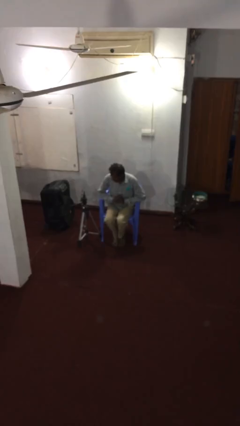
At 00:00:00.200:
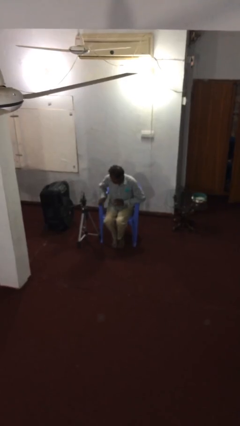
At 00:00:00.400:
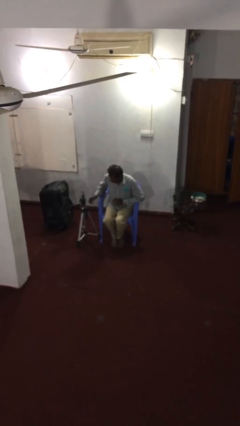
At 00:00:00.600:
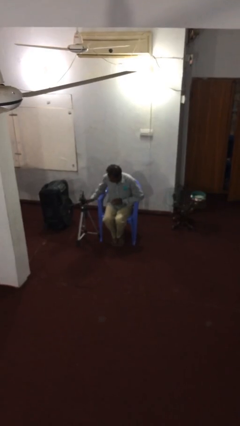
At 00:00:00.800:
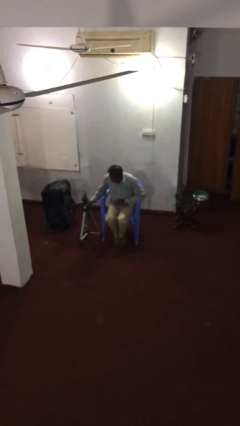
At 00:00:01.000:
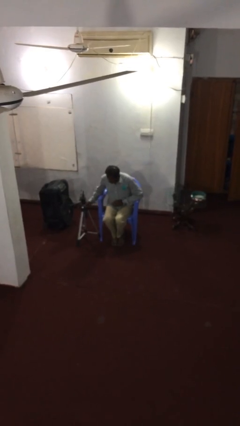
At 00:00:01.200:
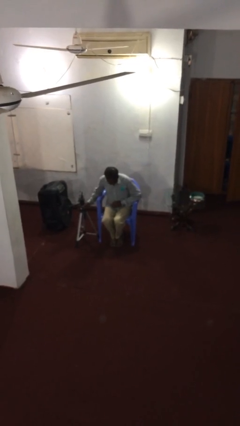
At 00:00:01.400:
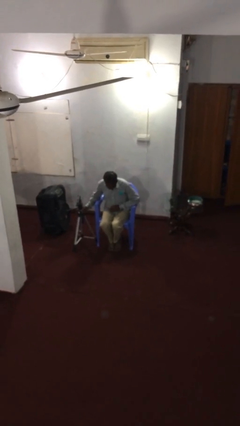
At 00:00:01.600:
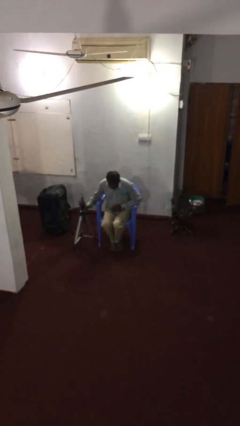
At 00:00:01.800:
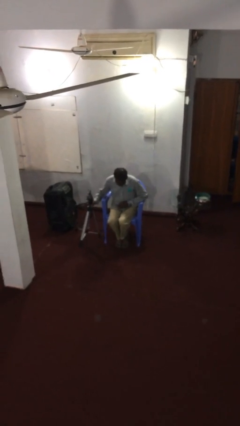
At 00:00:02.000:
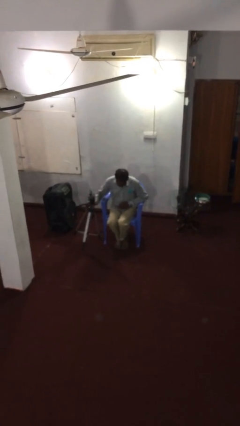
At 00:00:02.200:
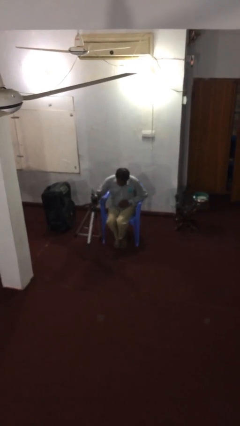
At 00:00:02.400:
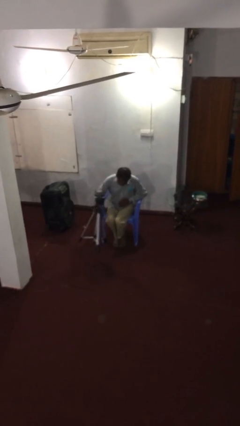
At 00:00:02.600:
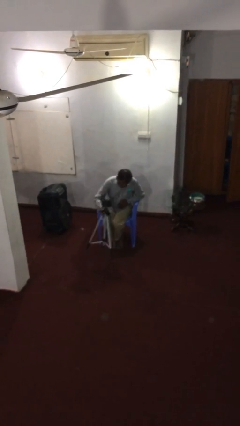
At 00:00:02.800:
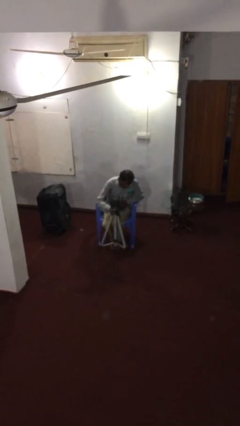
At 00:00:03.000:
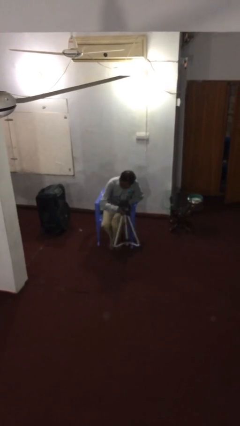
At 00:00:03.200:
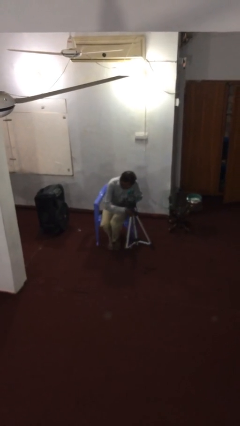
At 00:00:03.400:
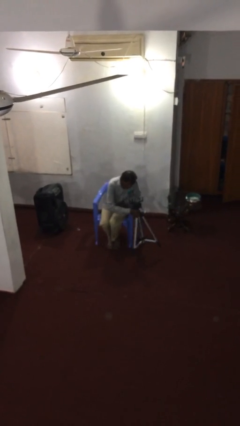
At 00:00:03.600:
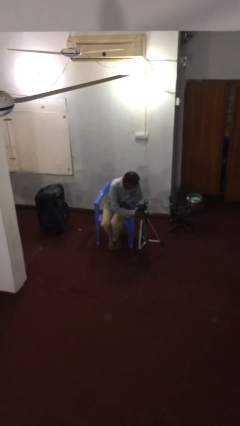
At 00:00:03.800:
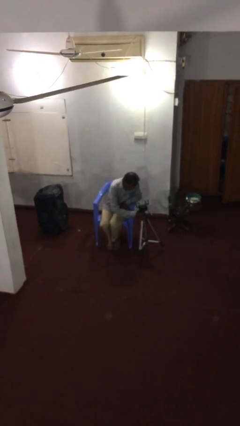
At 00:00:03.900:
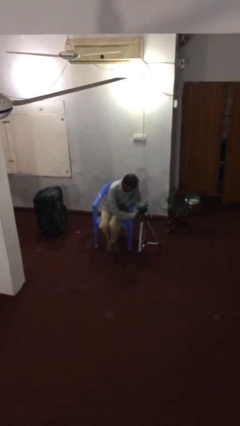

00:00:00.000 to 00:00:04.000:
person picks up object from floor

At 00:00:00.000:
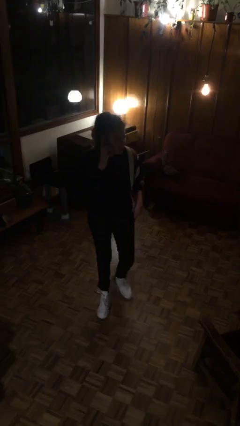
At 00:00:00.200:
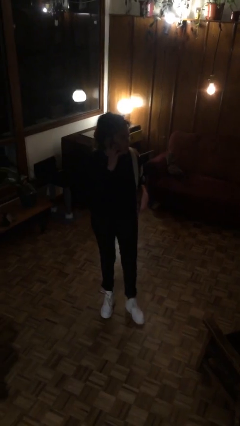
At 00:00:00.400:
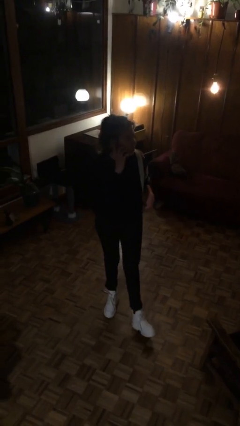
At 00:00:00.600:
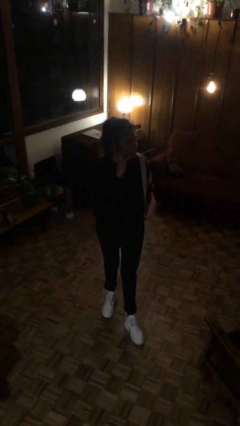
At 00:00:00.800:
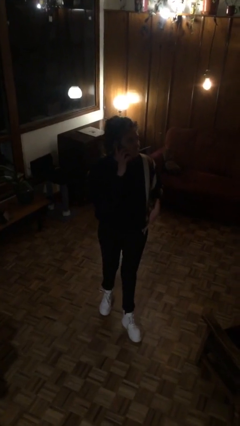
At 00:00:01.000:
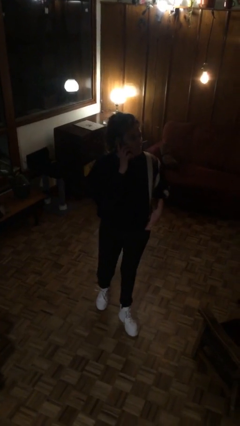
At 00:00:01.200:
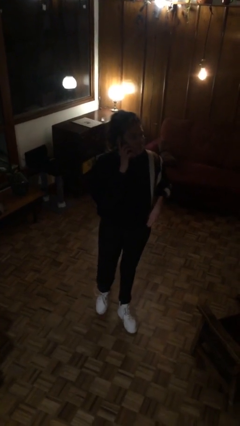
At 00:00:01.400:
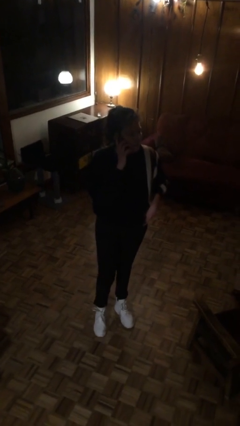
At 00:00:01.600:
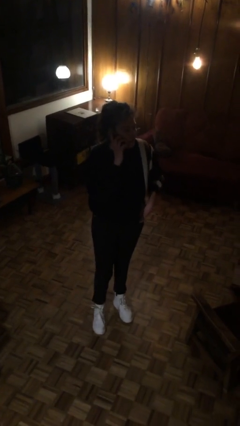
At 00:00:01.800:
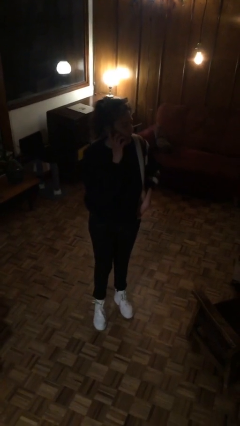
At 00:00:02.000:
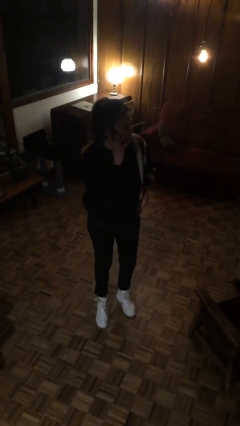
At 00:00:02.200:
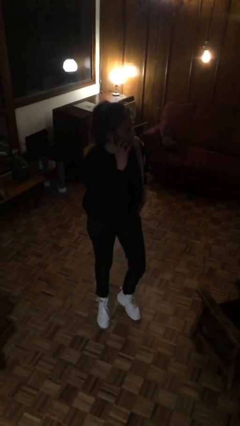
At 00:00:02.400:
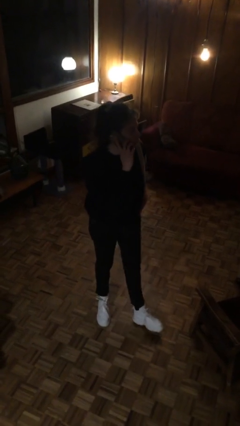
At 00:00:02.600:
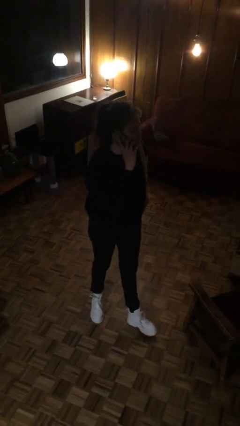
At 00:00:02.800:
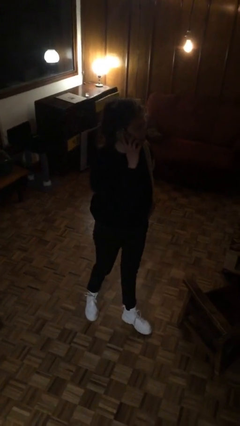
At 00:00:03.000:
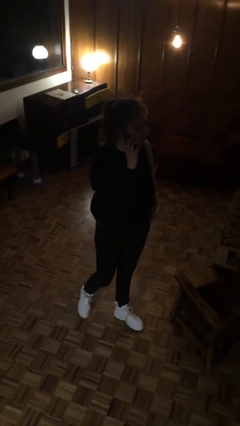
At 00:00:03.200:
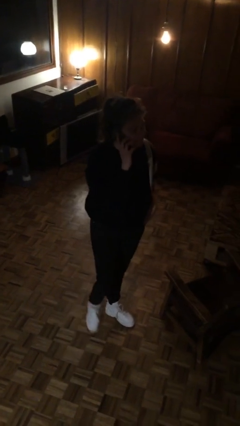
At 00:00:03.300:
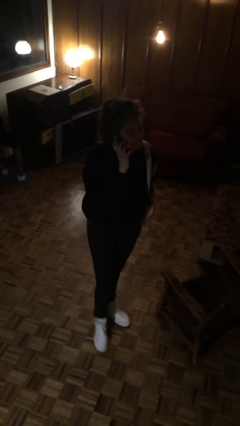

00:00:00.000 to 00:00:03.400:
person talks on phone

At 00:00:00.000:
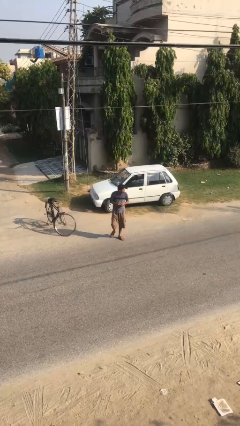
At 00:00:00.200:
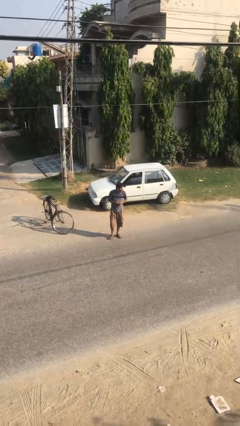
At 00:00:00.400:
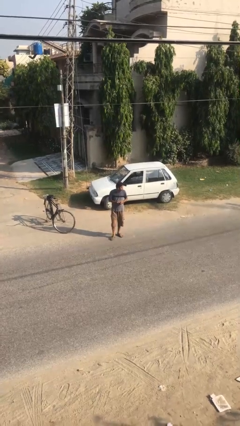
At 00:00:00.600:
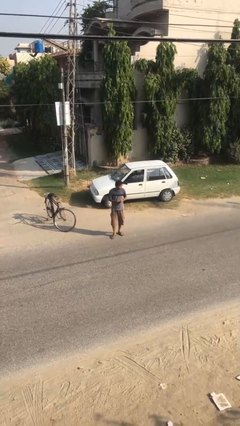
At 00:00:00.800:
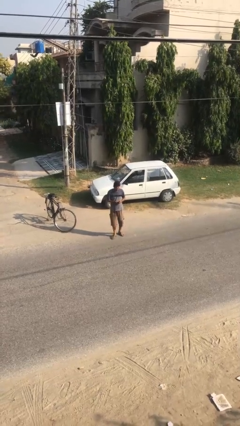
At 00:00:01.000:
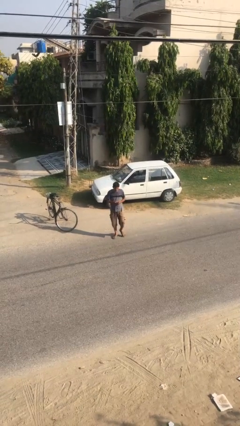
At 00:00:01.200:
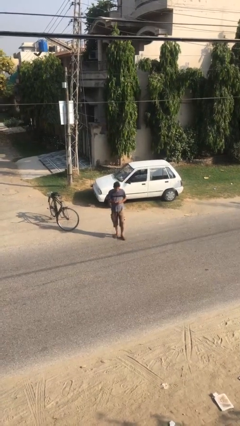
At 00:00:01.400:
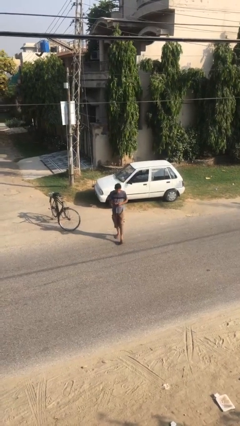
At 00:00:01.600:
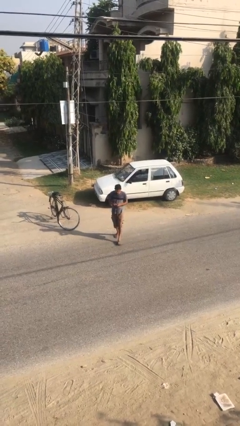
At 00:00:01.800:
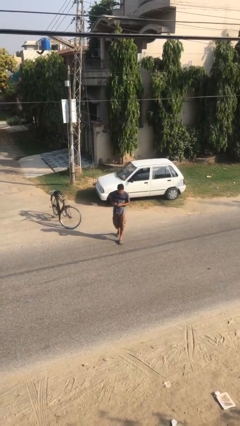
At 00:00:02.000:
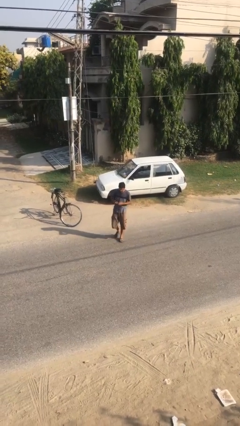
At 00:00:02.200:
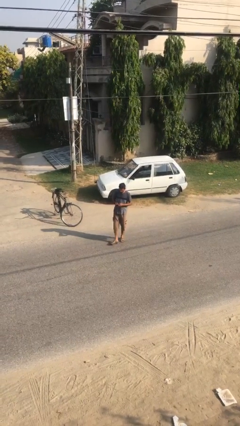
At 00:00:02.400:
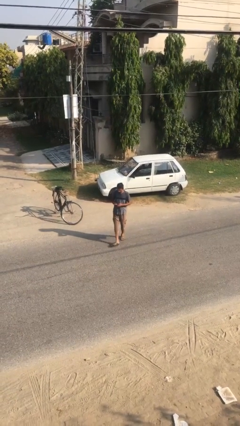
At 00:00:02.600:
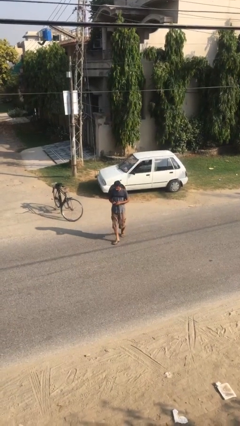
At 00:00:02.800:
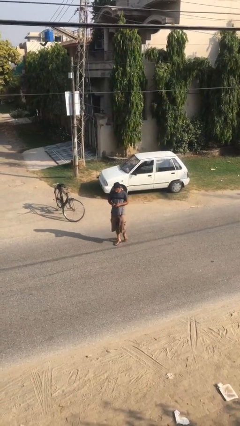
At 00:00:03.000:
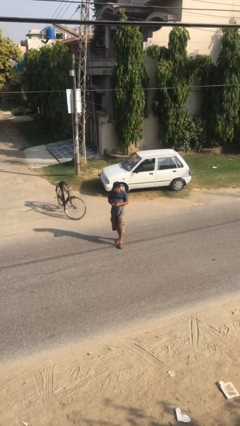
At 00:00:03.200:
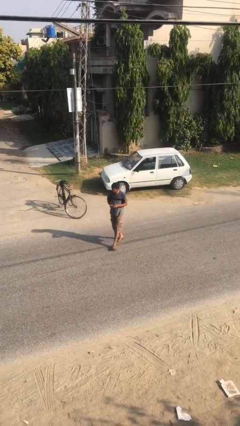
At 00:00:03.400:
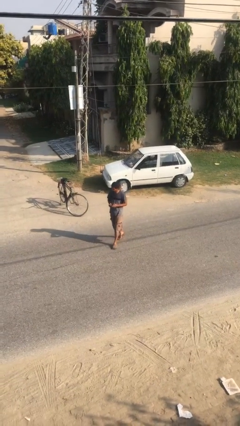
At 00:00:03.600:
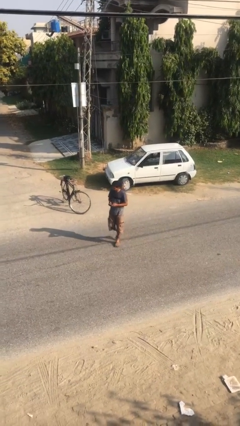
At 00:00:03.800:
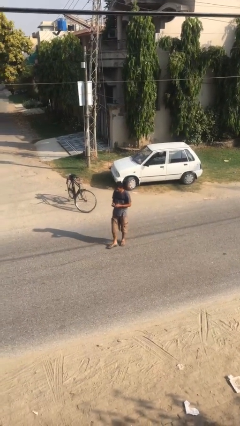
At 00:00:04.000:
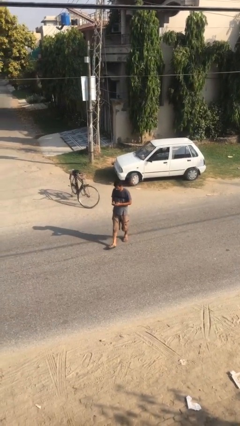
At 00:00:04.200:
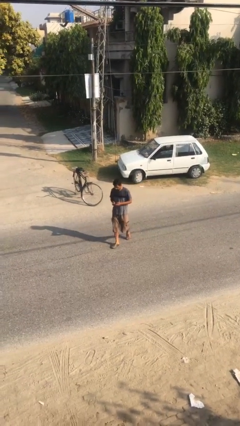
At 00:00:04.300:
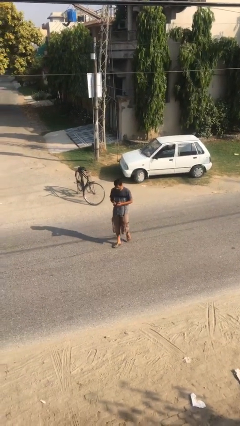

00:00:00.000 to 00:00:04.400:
person texts on phone

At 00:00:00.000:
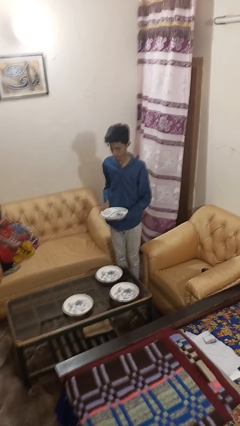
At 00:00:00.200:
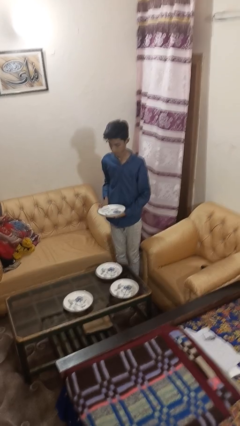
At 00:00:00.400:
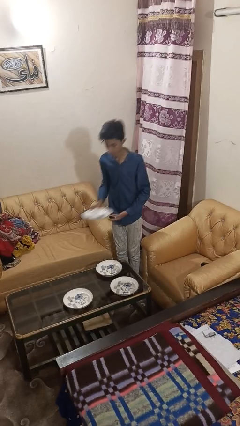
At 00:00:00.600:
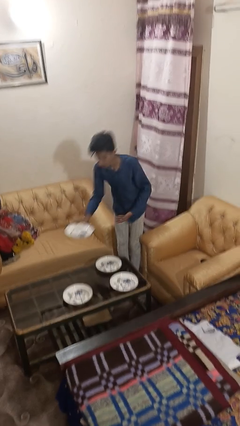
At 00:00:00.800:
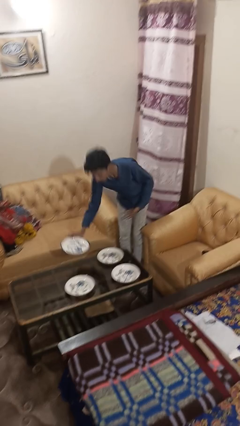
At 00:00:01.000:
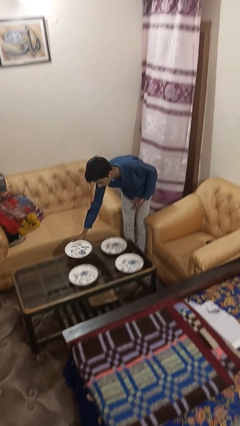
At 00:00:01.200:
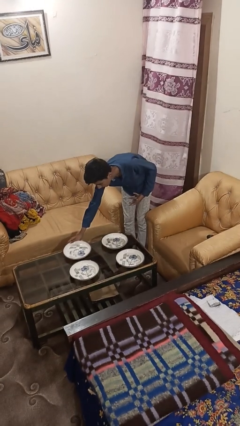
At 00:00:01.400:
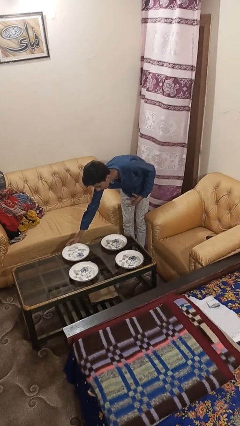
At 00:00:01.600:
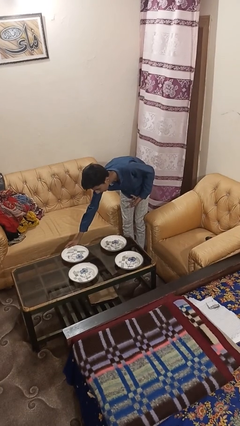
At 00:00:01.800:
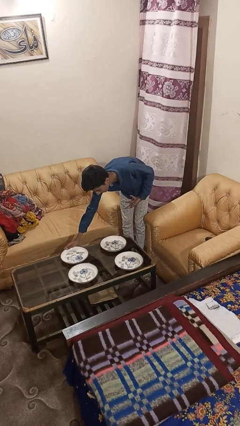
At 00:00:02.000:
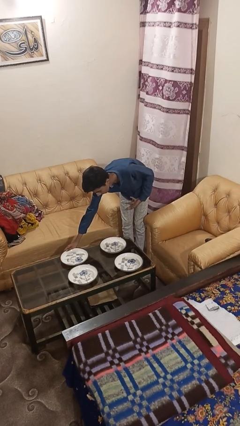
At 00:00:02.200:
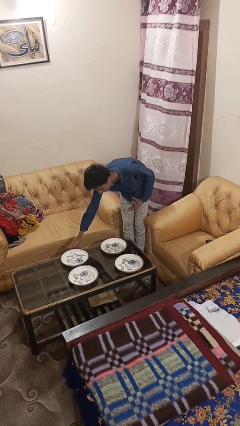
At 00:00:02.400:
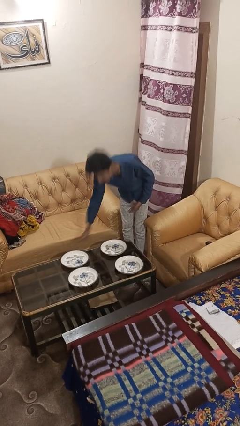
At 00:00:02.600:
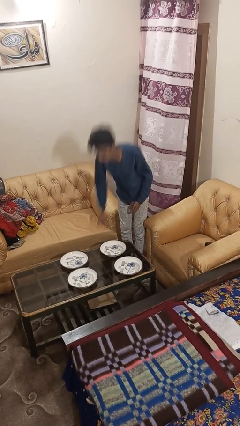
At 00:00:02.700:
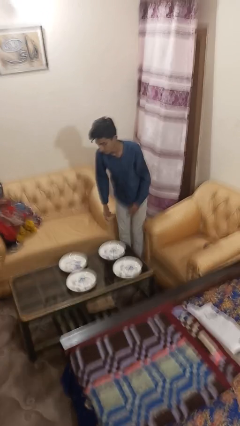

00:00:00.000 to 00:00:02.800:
person sets table

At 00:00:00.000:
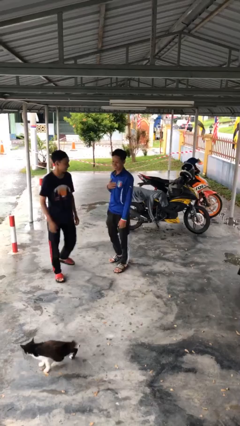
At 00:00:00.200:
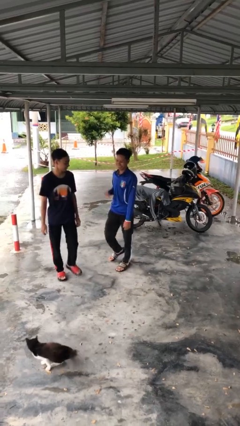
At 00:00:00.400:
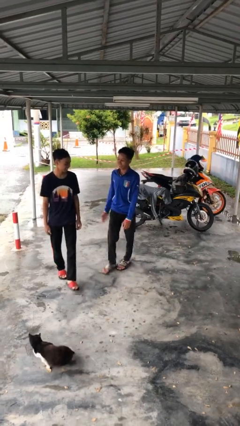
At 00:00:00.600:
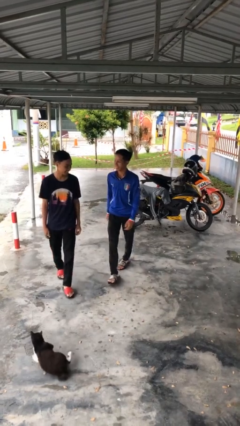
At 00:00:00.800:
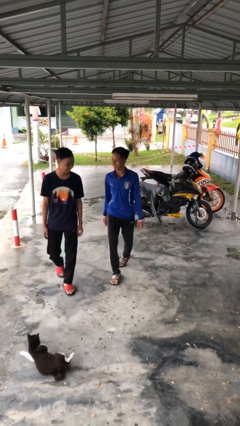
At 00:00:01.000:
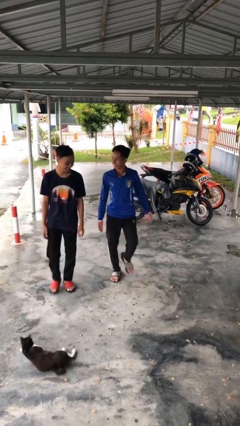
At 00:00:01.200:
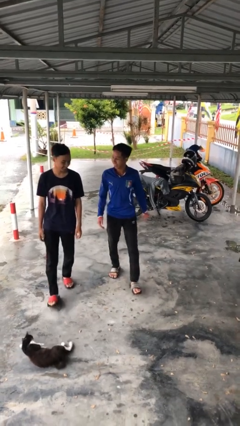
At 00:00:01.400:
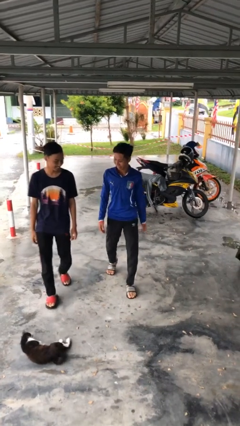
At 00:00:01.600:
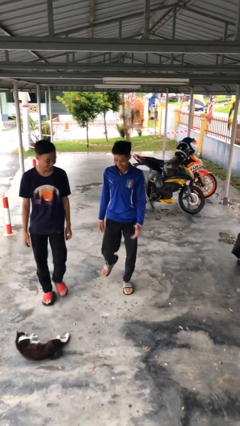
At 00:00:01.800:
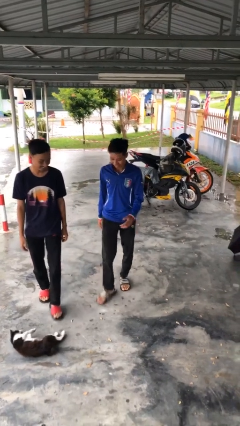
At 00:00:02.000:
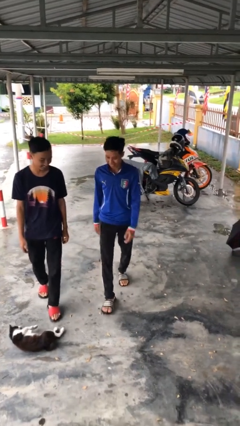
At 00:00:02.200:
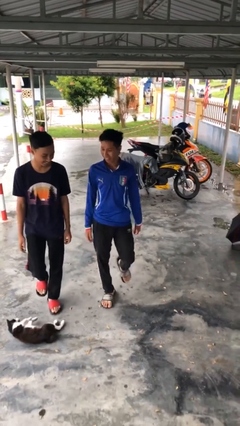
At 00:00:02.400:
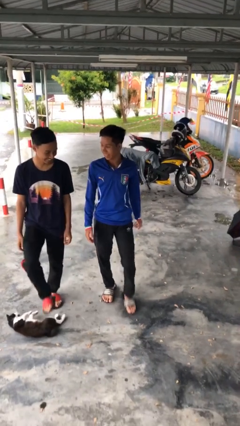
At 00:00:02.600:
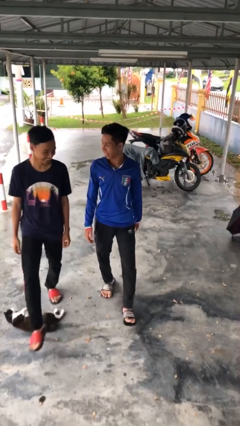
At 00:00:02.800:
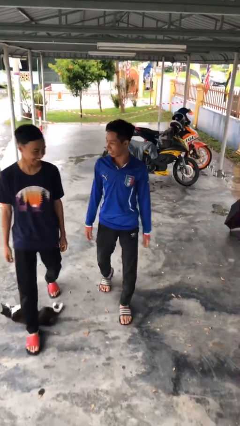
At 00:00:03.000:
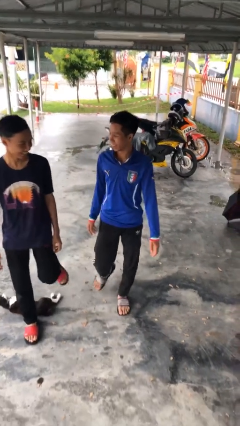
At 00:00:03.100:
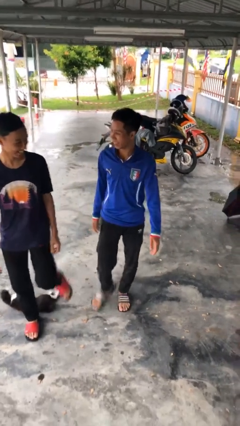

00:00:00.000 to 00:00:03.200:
person talks to person
